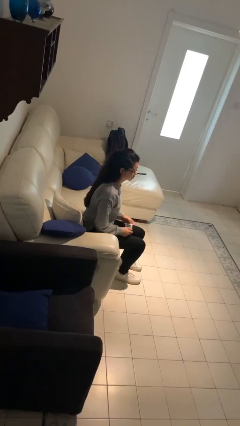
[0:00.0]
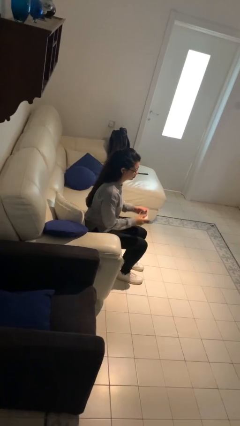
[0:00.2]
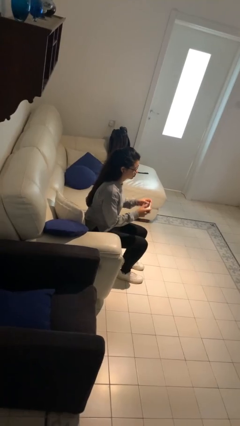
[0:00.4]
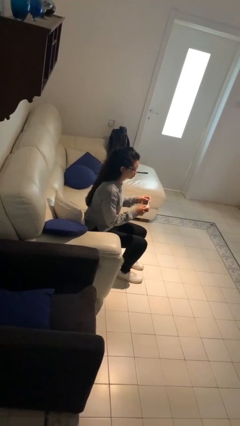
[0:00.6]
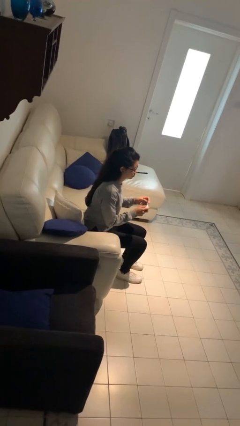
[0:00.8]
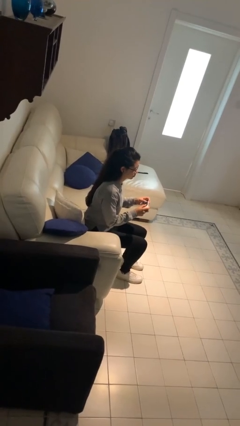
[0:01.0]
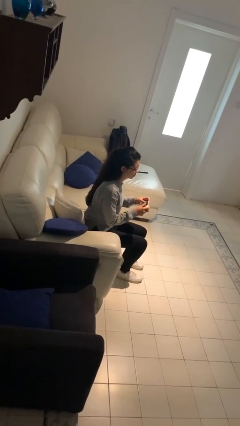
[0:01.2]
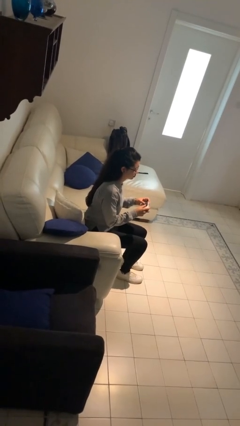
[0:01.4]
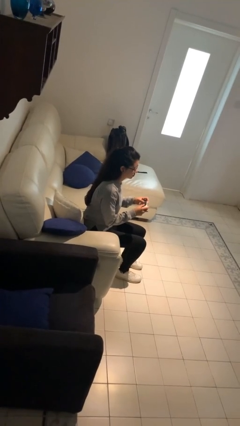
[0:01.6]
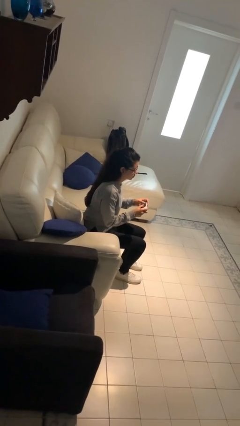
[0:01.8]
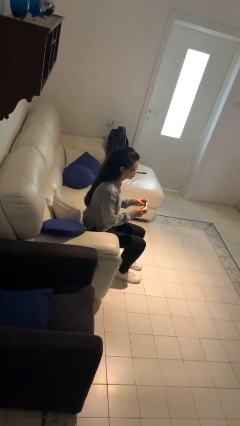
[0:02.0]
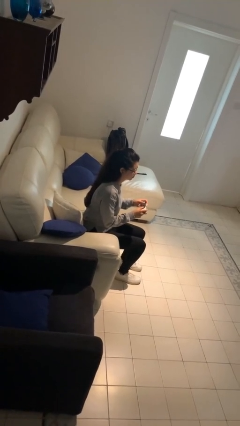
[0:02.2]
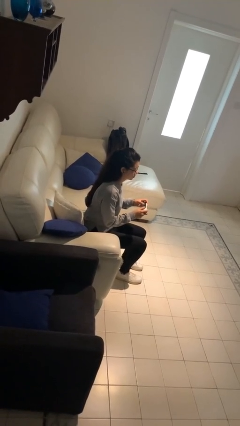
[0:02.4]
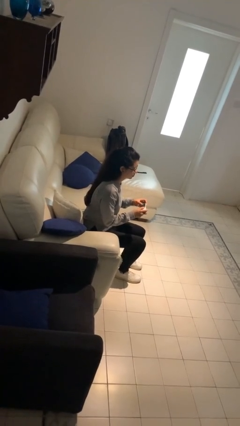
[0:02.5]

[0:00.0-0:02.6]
person interacts with handheld game

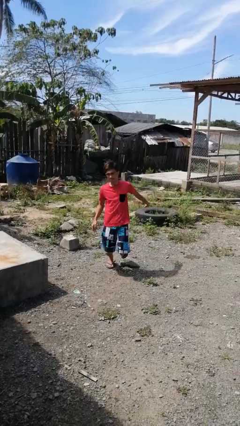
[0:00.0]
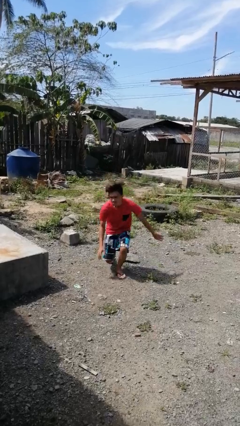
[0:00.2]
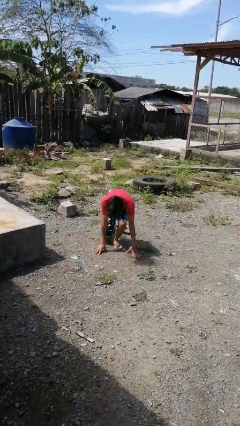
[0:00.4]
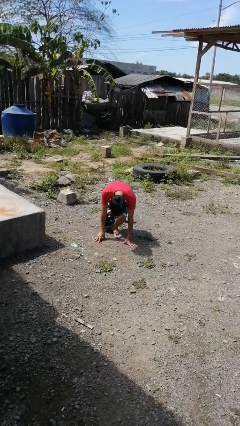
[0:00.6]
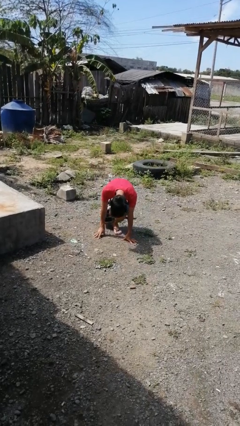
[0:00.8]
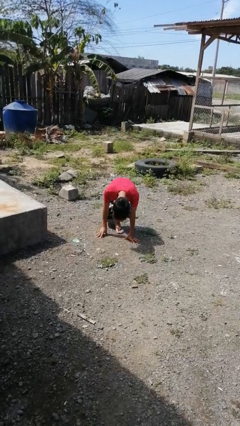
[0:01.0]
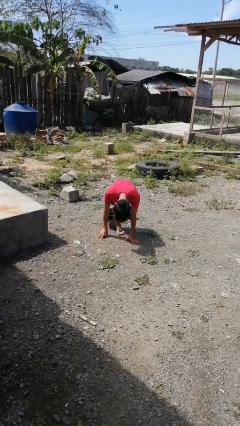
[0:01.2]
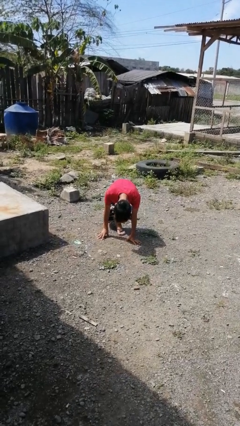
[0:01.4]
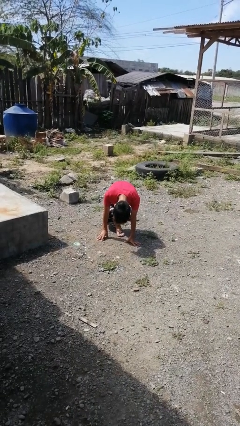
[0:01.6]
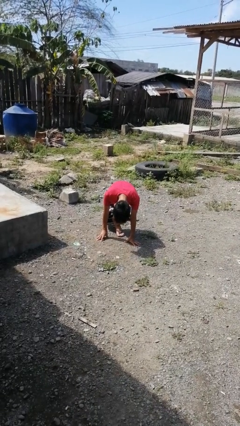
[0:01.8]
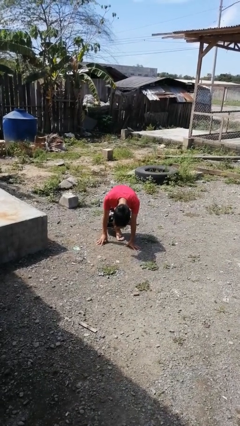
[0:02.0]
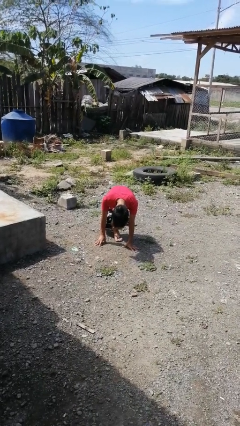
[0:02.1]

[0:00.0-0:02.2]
person trips on object on floor

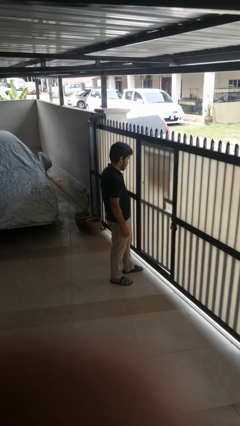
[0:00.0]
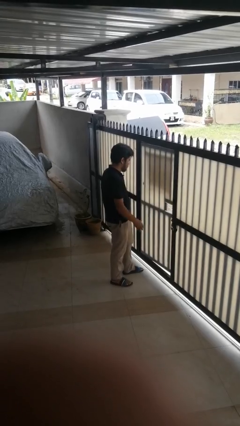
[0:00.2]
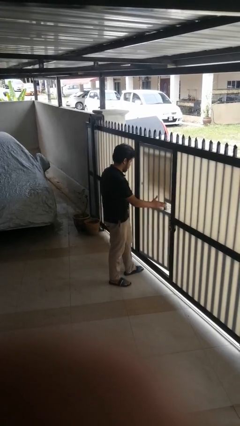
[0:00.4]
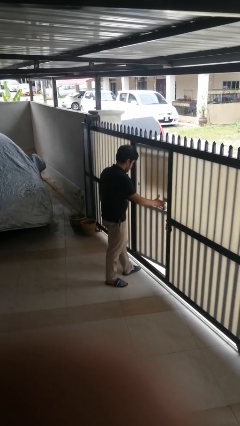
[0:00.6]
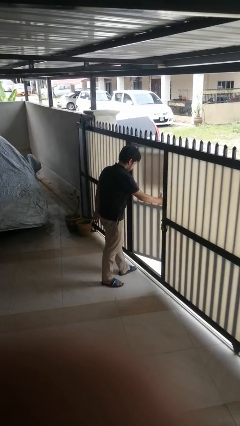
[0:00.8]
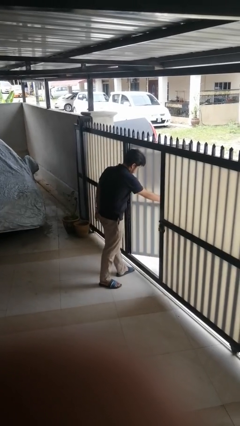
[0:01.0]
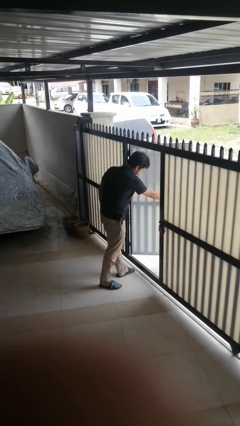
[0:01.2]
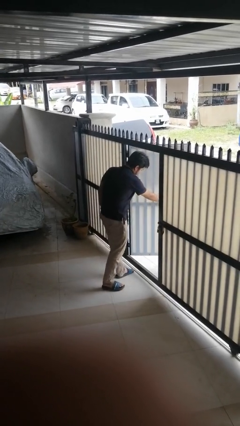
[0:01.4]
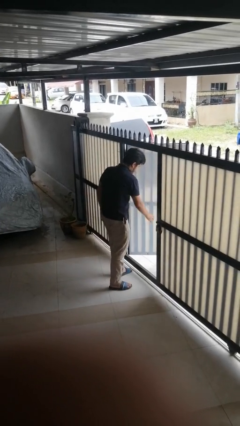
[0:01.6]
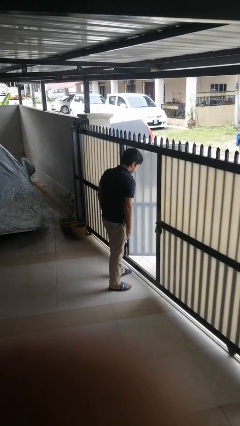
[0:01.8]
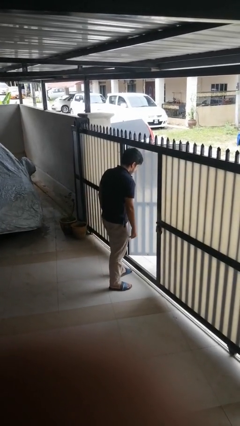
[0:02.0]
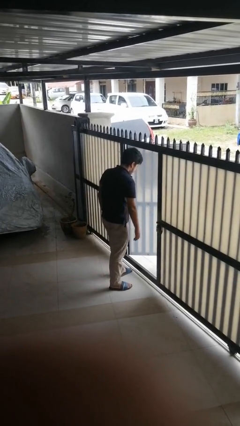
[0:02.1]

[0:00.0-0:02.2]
person opens gate

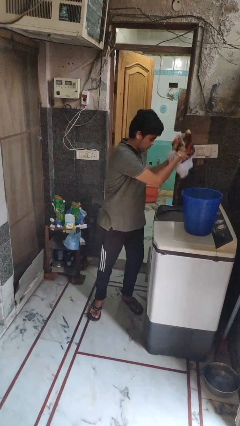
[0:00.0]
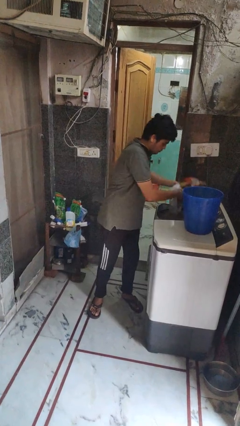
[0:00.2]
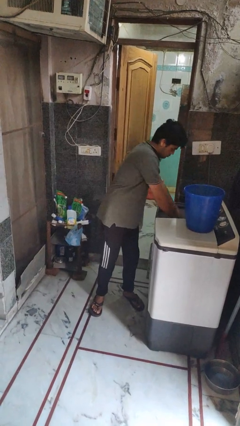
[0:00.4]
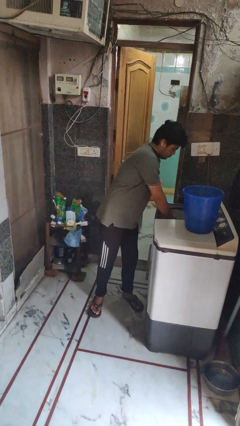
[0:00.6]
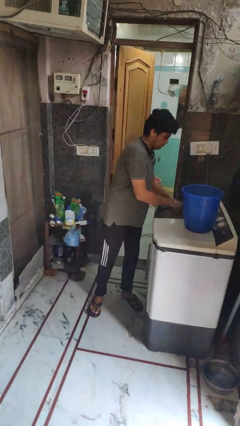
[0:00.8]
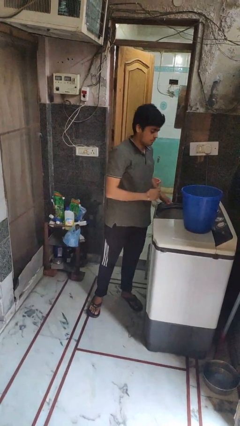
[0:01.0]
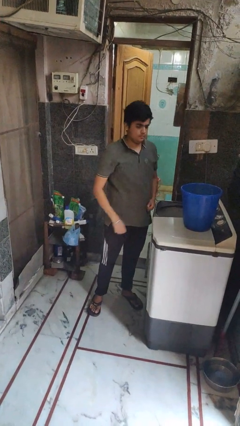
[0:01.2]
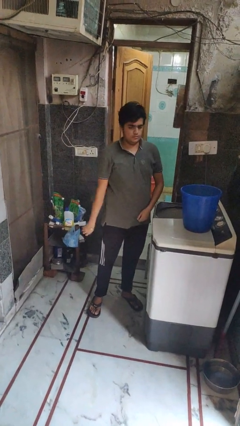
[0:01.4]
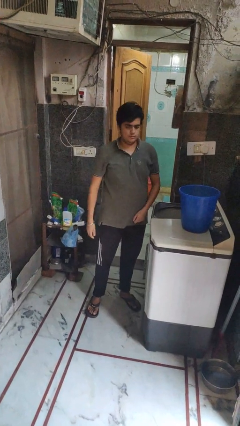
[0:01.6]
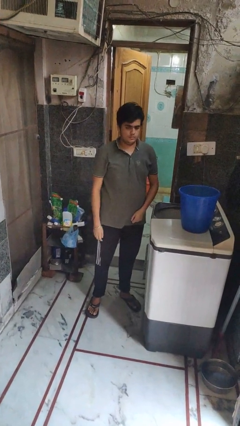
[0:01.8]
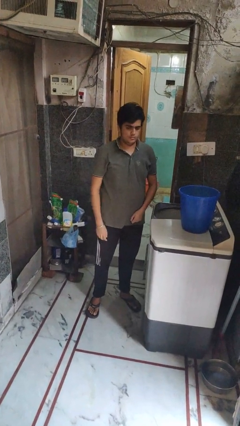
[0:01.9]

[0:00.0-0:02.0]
person loads clotheswasher

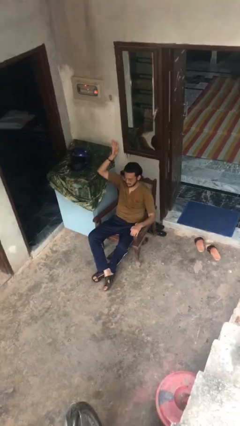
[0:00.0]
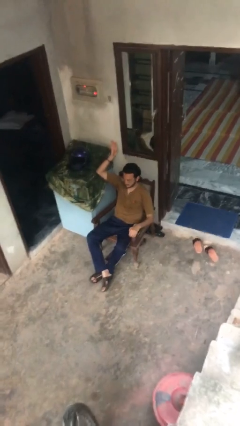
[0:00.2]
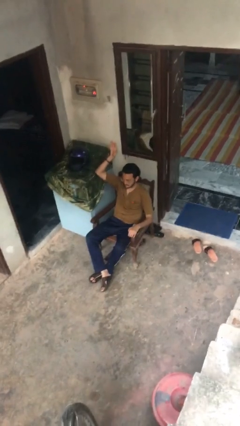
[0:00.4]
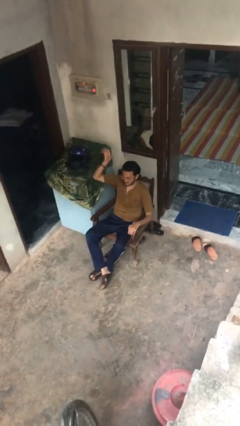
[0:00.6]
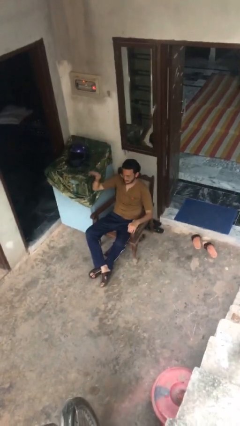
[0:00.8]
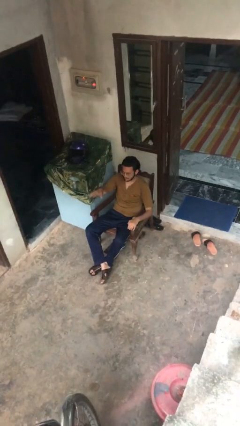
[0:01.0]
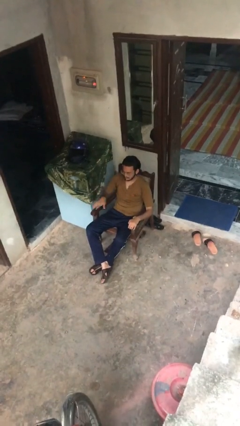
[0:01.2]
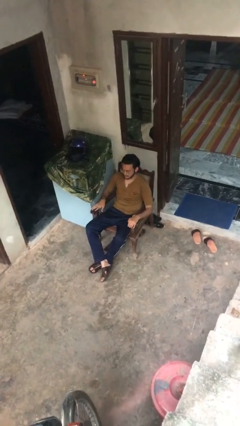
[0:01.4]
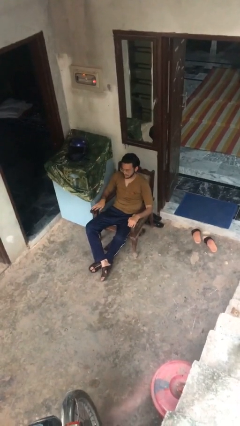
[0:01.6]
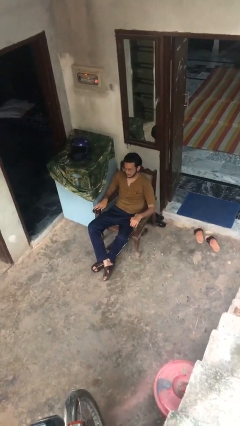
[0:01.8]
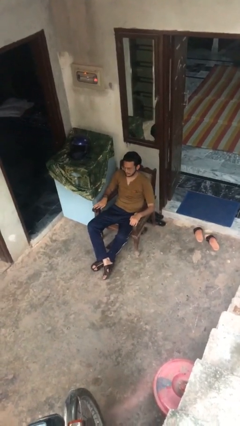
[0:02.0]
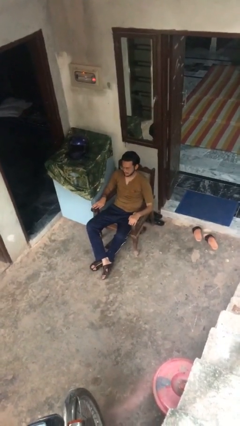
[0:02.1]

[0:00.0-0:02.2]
person gestures lower hand

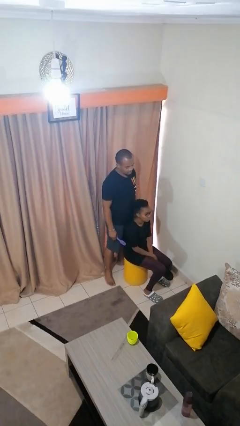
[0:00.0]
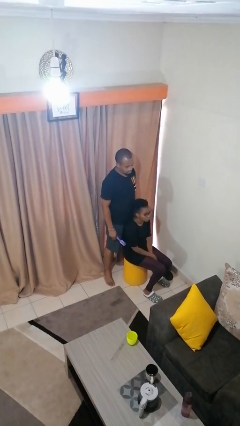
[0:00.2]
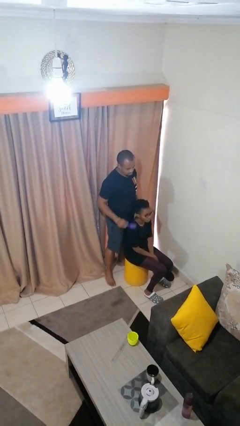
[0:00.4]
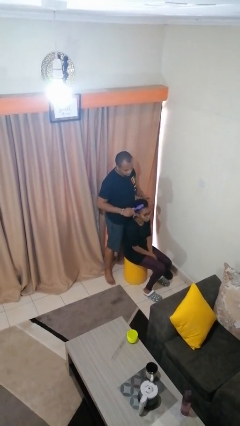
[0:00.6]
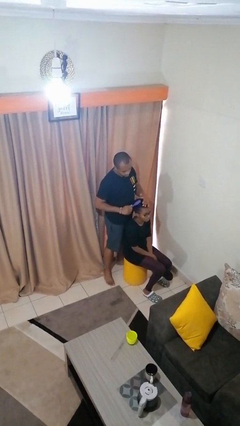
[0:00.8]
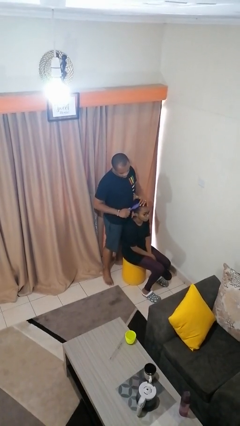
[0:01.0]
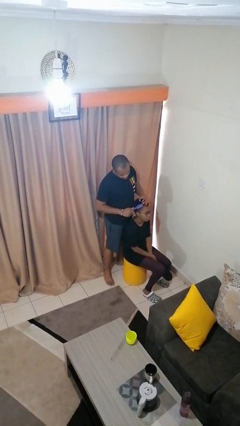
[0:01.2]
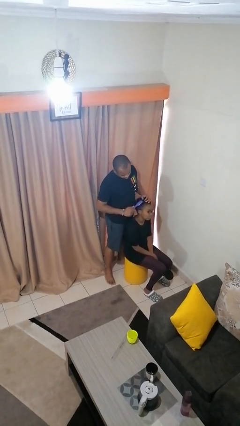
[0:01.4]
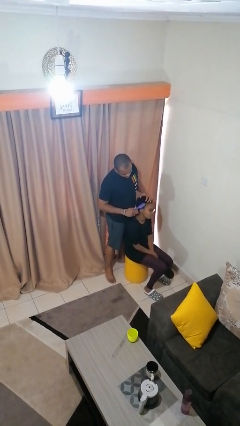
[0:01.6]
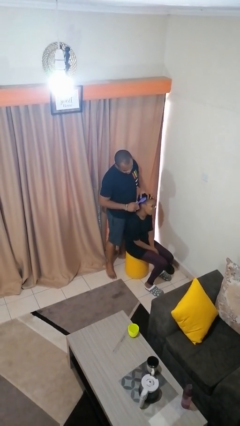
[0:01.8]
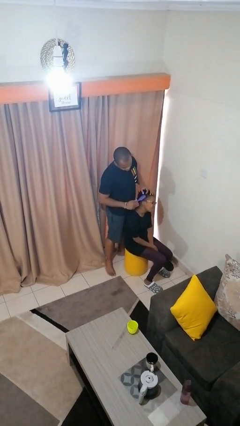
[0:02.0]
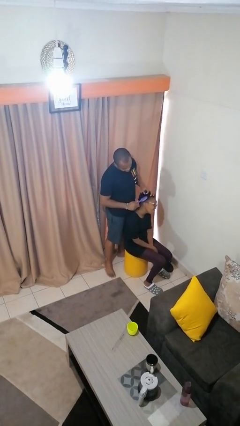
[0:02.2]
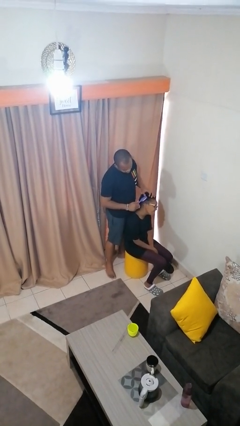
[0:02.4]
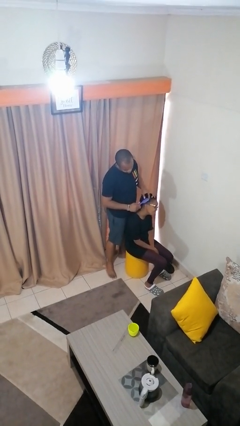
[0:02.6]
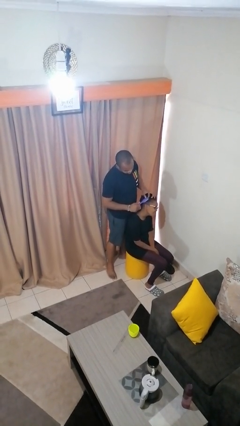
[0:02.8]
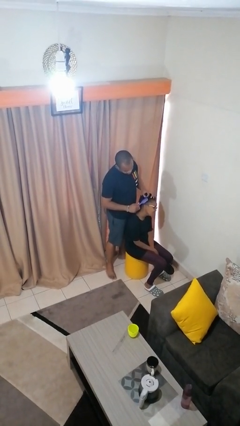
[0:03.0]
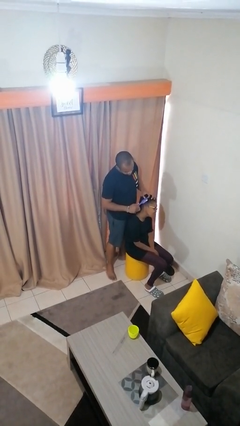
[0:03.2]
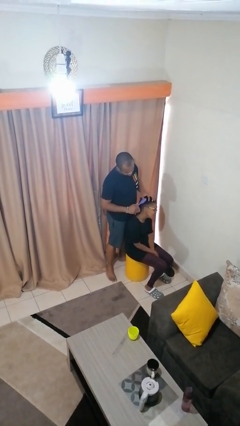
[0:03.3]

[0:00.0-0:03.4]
person brushes hair of person

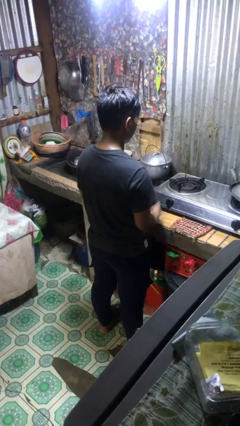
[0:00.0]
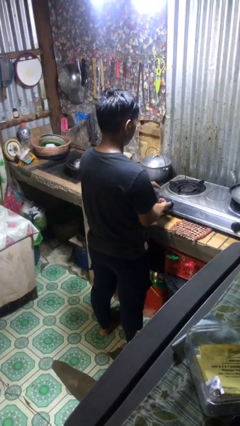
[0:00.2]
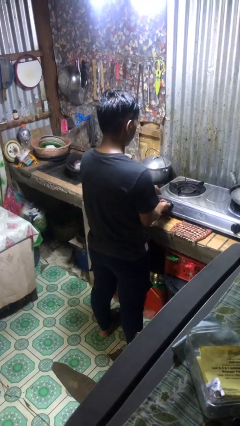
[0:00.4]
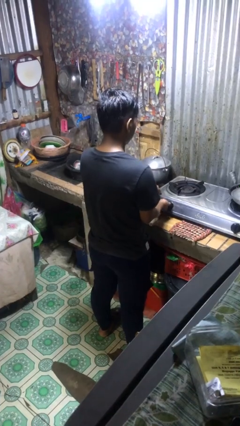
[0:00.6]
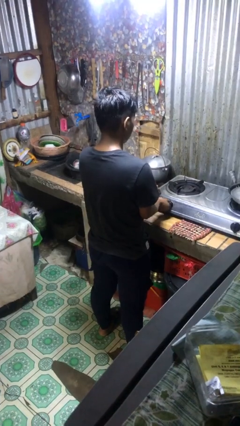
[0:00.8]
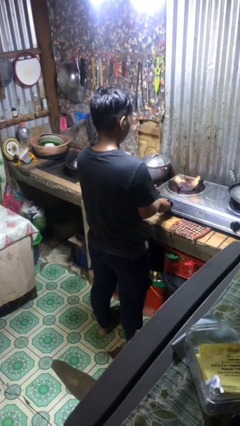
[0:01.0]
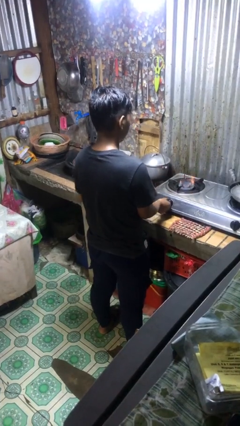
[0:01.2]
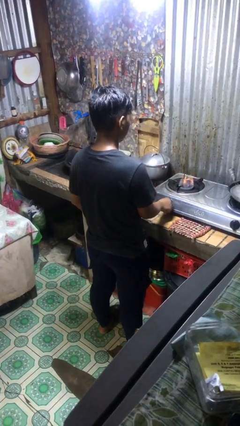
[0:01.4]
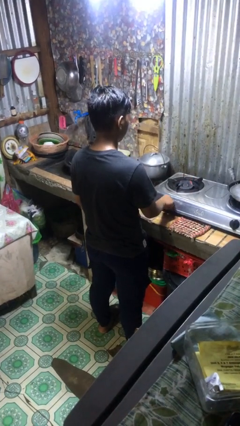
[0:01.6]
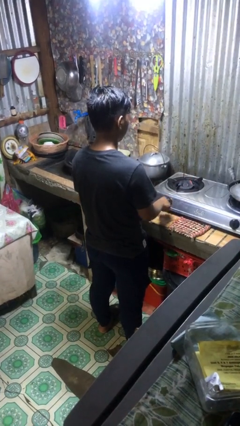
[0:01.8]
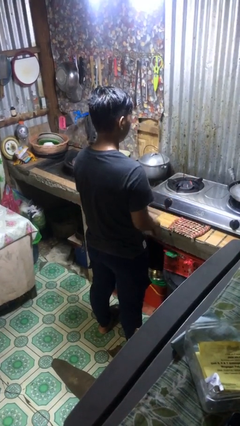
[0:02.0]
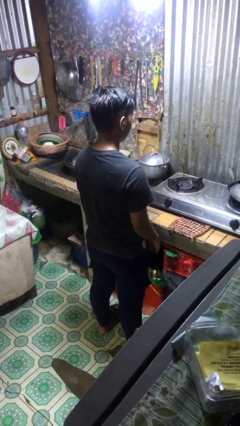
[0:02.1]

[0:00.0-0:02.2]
person turns on stovetop

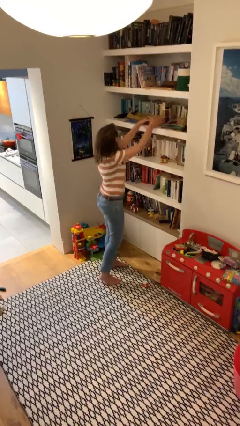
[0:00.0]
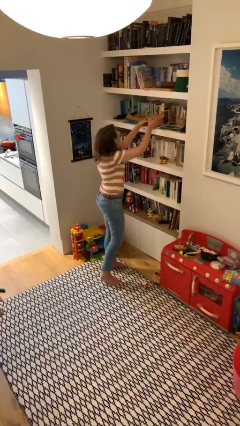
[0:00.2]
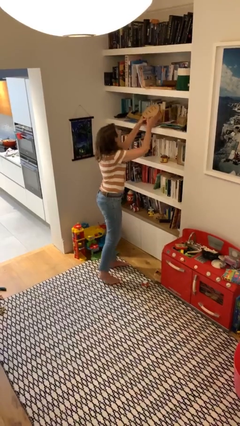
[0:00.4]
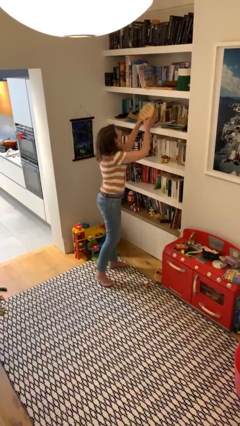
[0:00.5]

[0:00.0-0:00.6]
person picks up object from shelf
